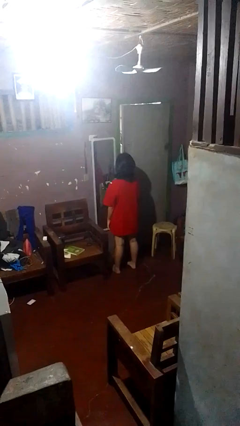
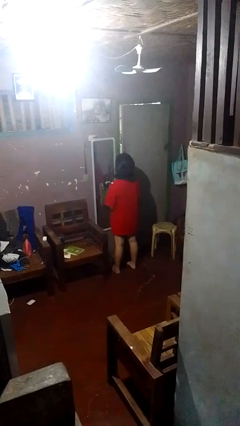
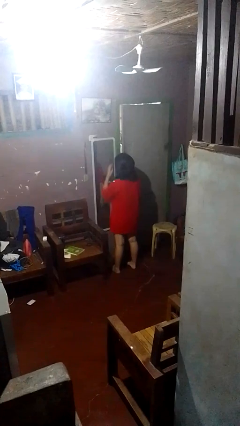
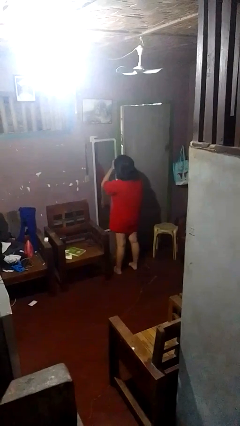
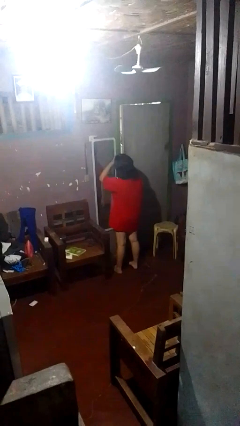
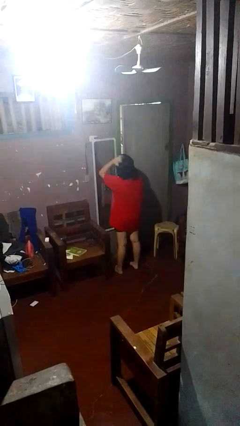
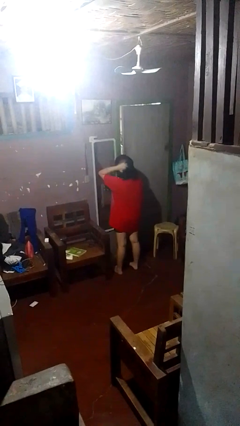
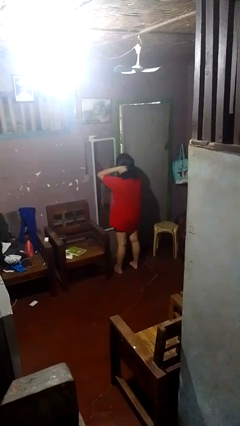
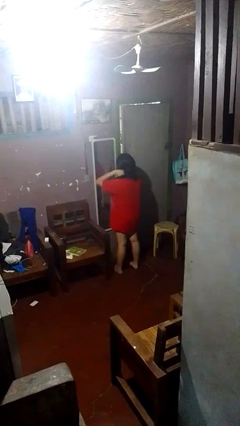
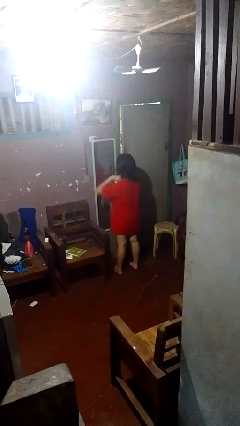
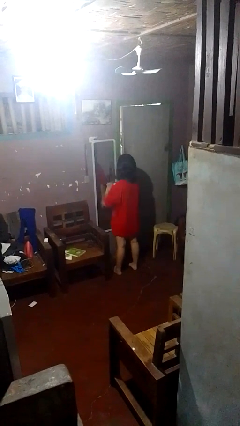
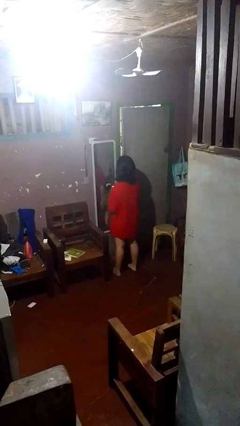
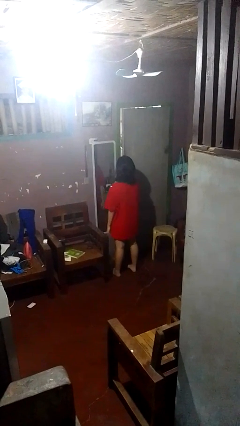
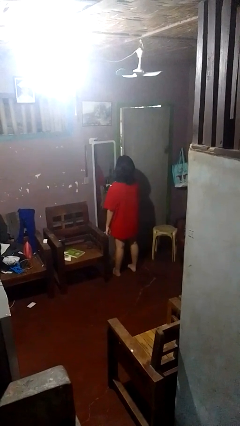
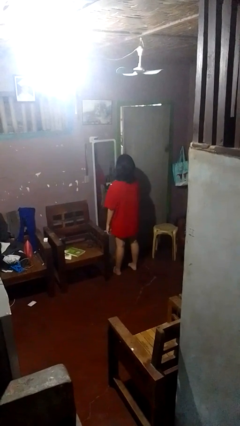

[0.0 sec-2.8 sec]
person strokes hair

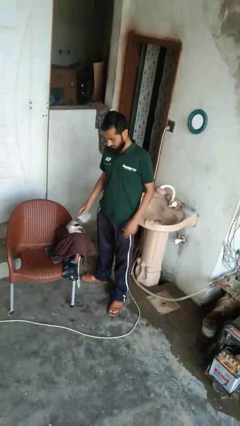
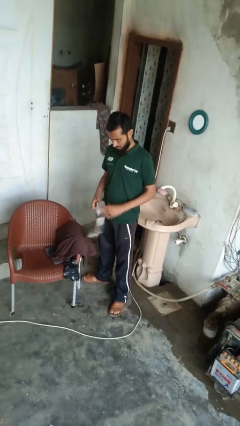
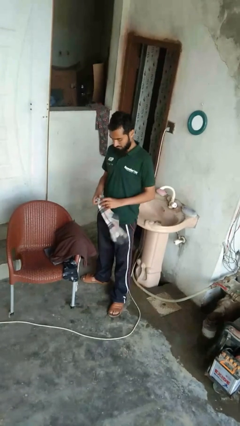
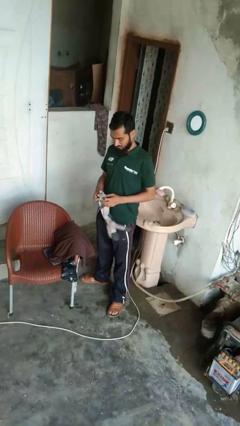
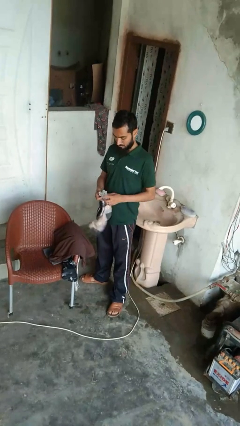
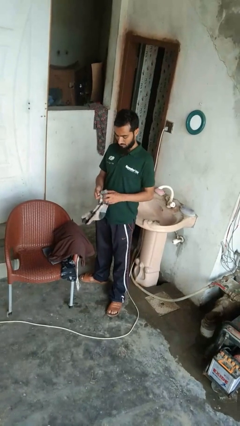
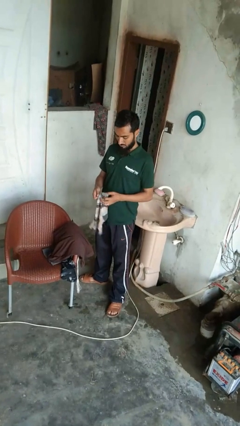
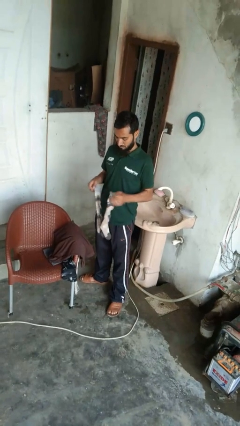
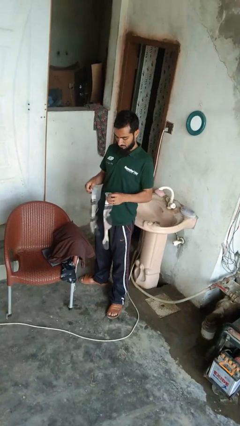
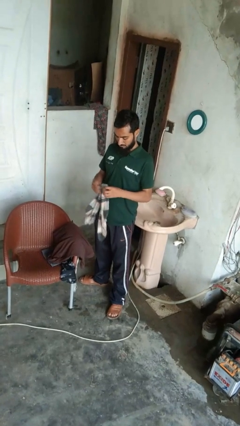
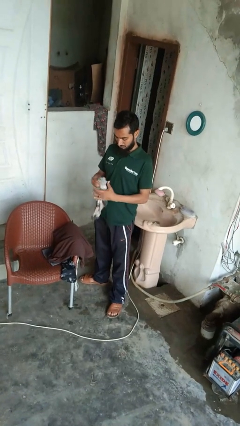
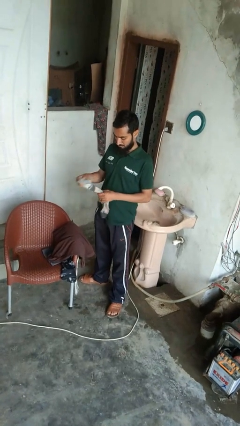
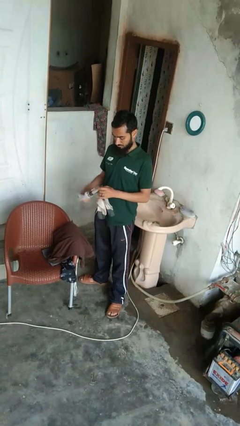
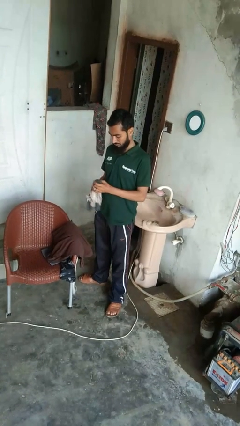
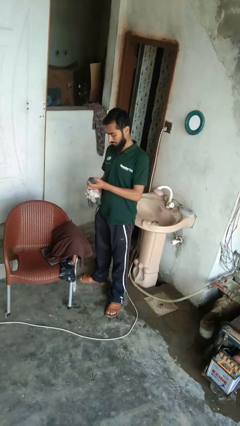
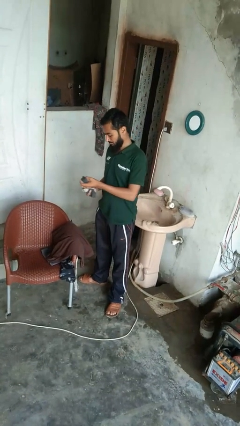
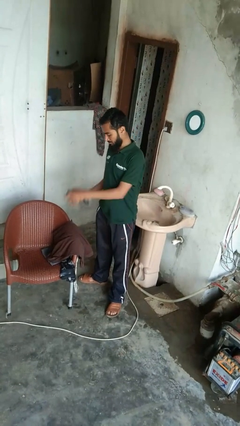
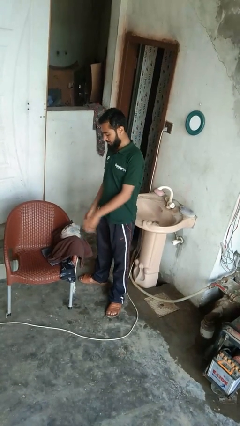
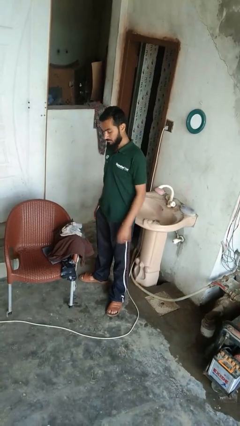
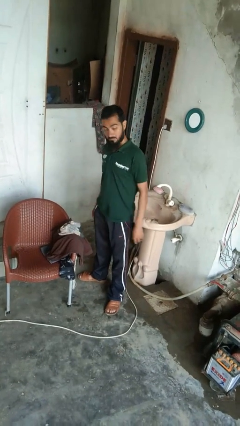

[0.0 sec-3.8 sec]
person folds socks

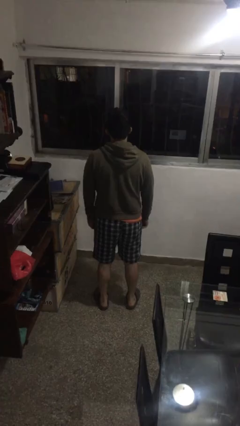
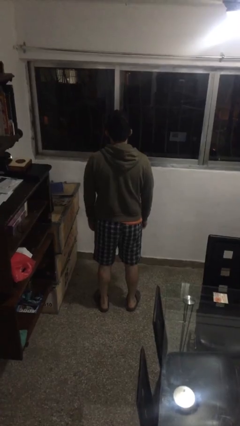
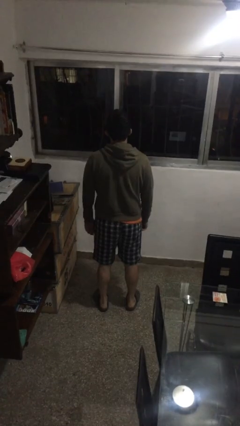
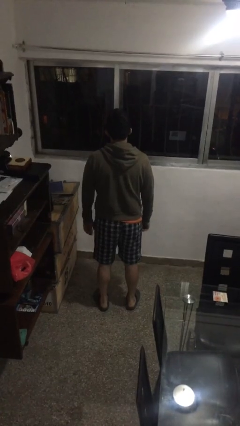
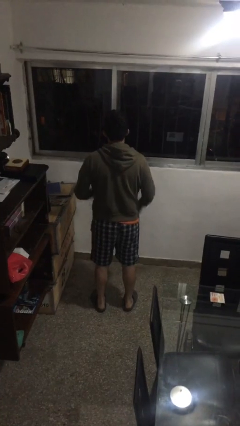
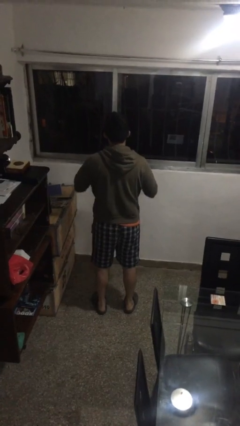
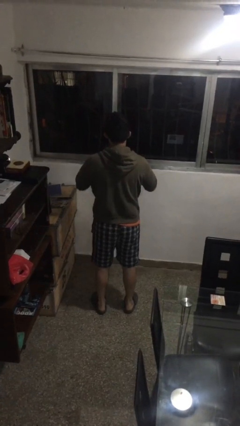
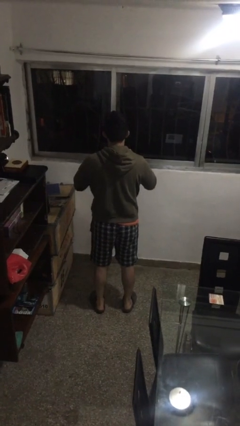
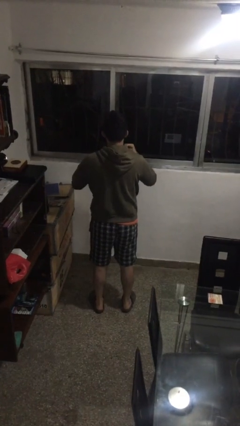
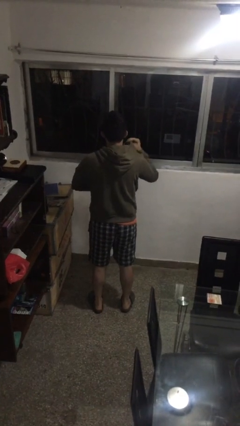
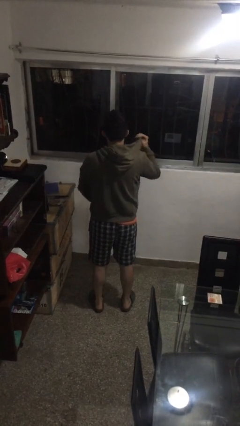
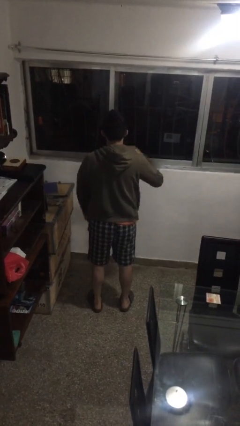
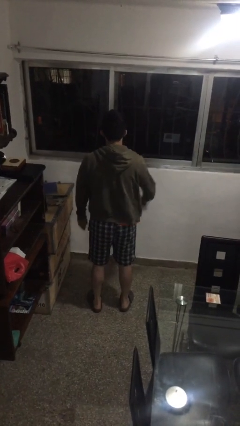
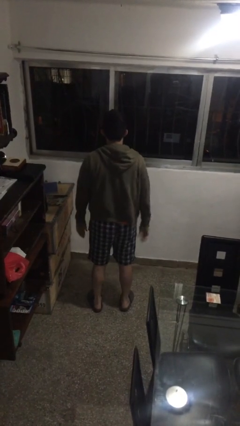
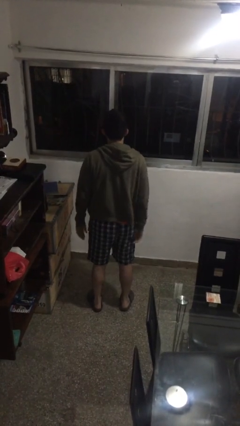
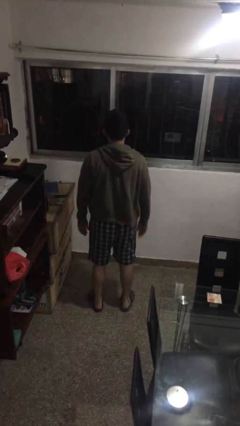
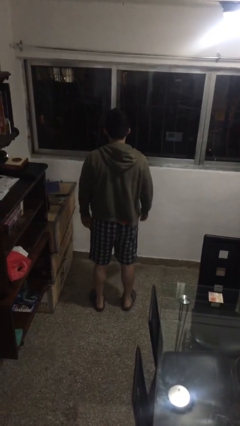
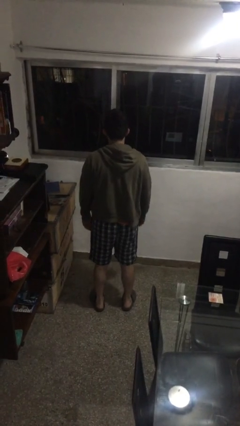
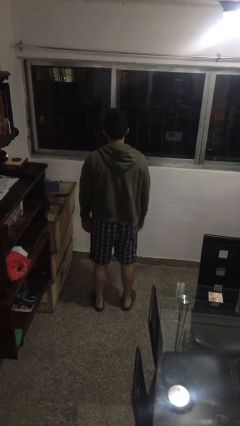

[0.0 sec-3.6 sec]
person unzips jacket

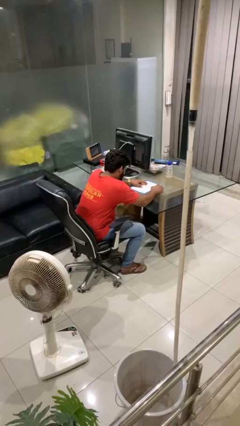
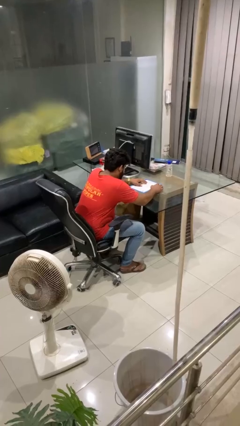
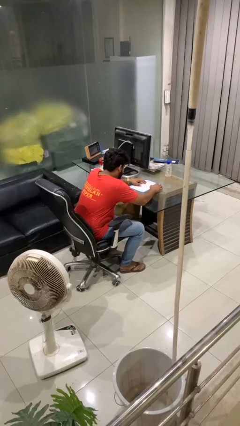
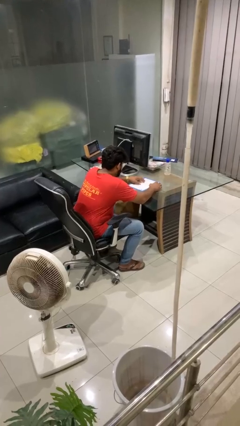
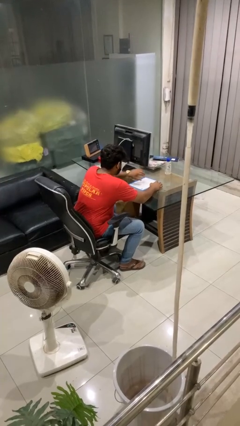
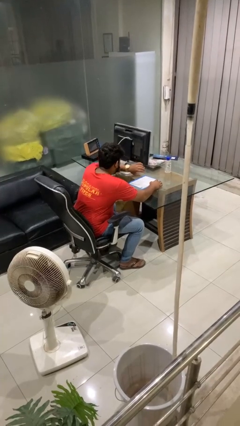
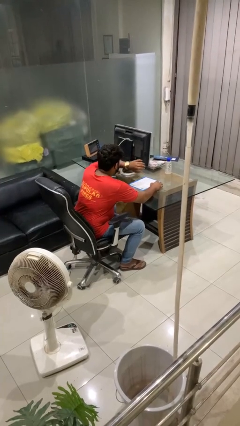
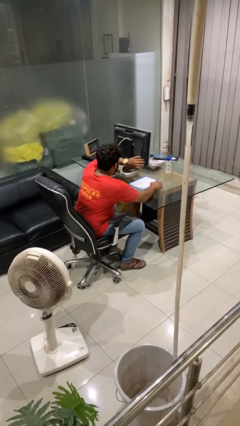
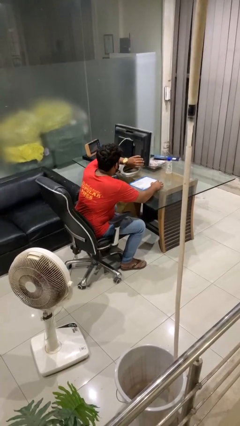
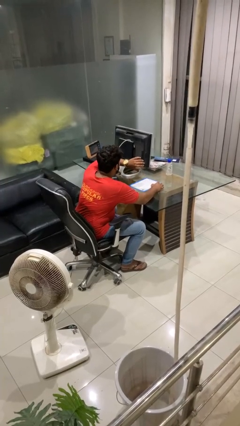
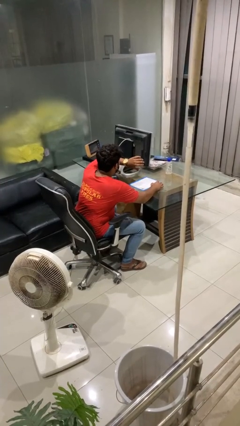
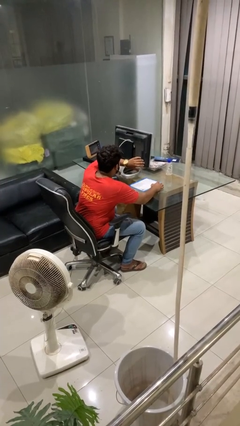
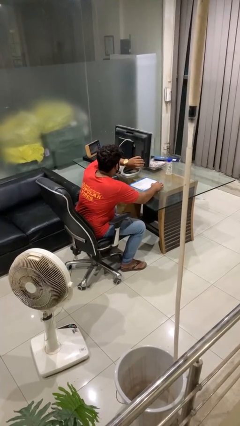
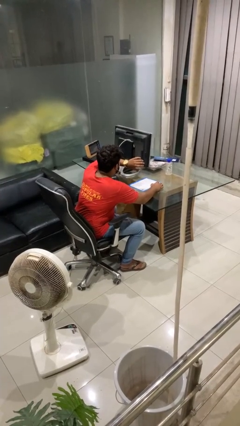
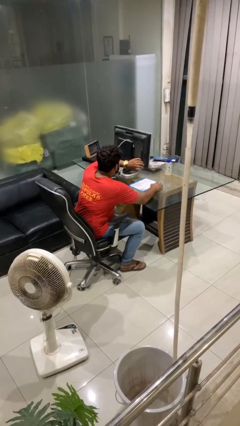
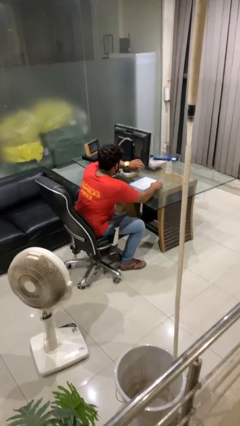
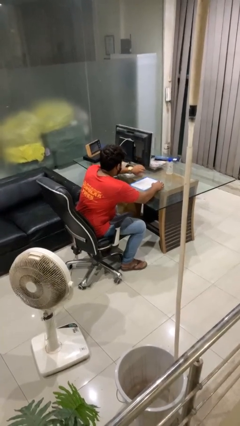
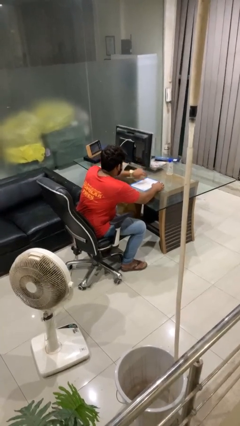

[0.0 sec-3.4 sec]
person looks at wristwatch

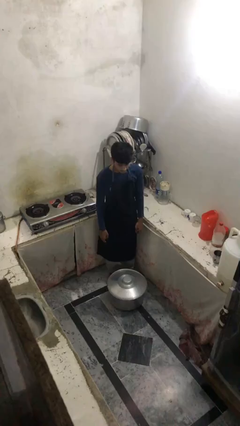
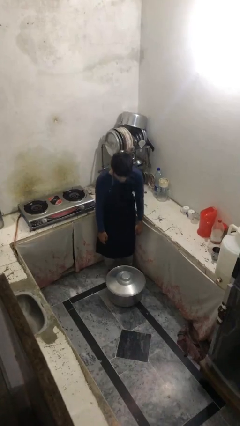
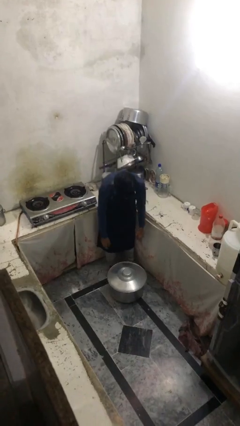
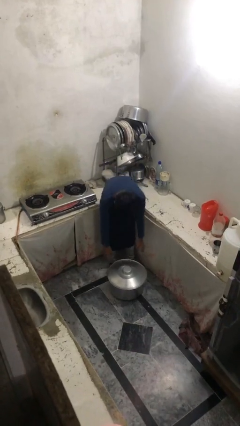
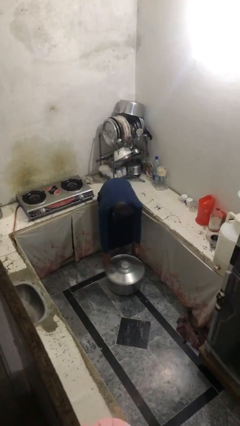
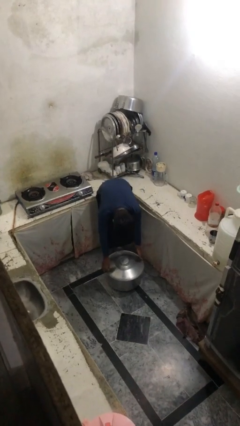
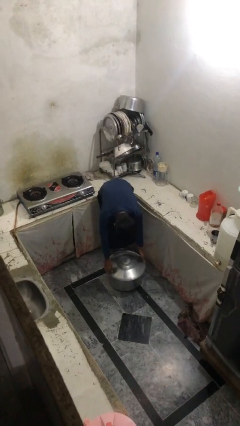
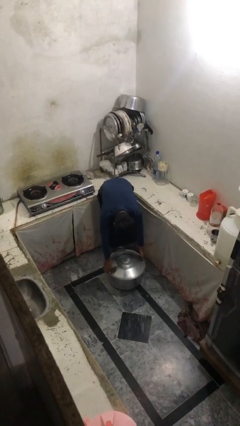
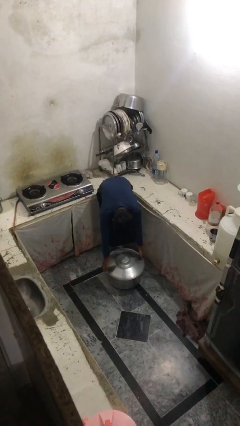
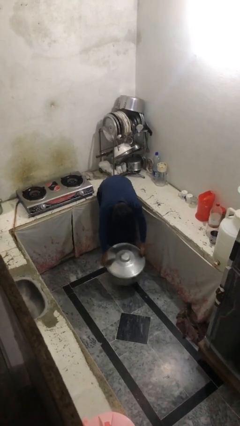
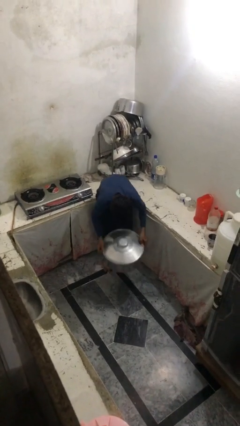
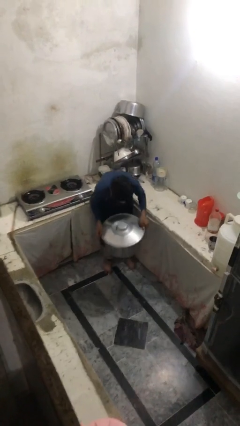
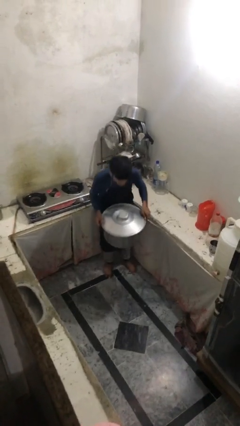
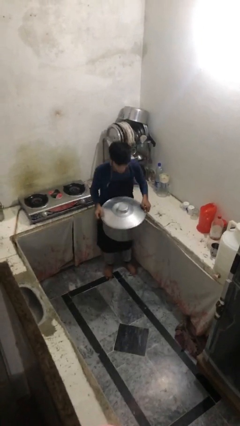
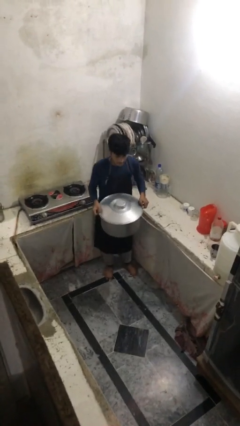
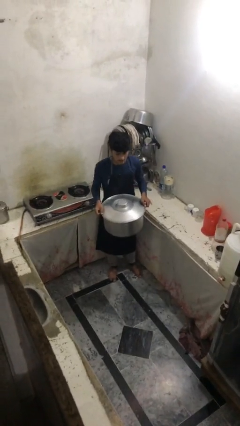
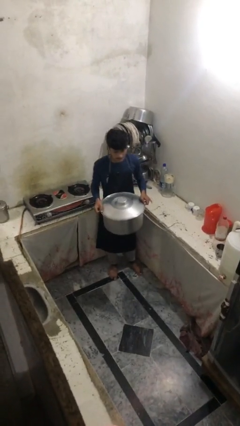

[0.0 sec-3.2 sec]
person picks up object from floor

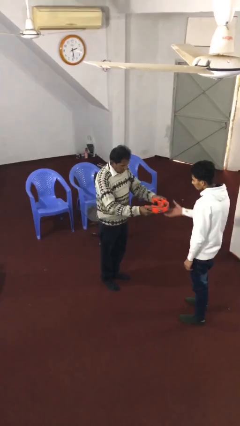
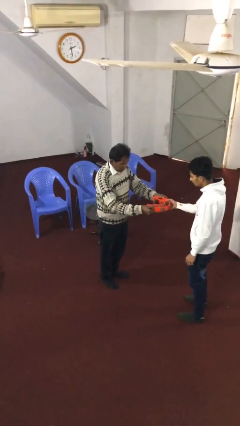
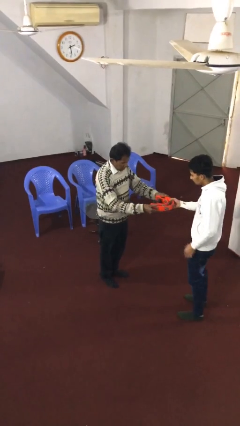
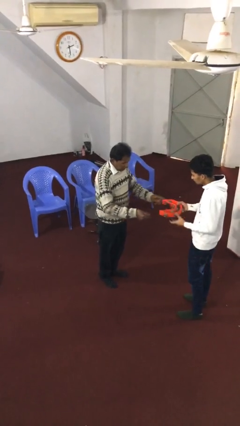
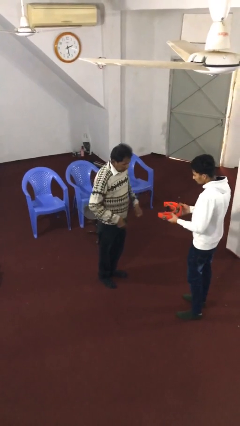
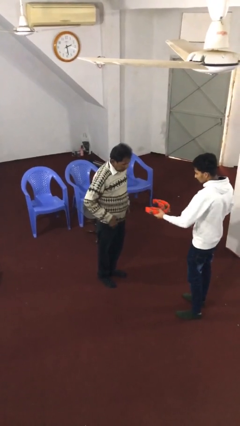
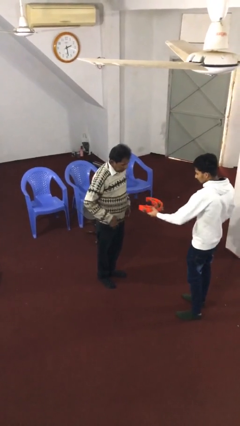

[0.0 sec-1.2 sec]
person transfers object to person
